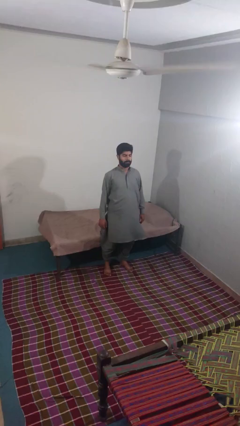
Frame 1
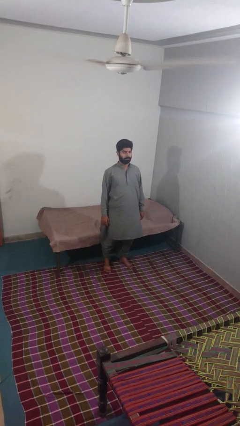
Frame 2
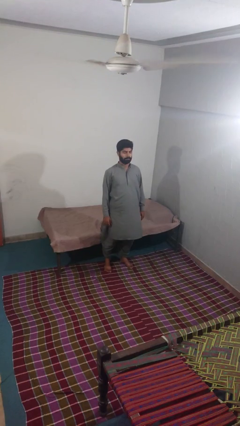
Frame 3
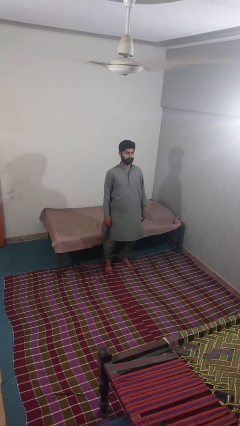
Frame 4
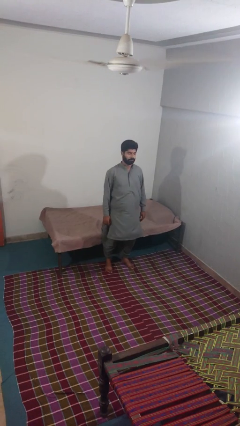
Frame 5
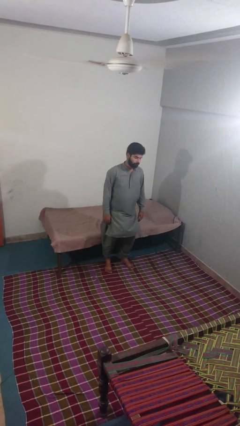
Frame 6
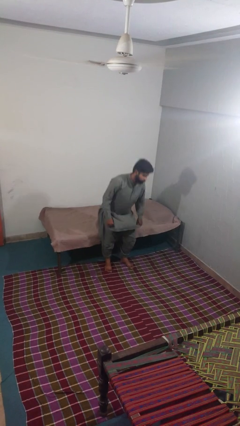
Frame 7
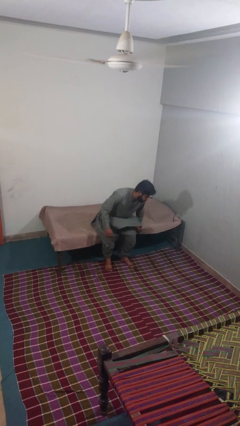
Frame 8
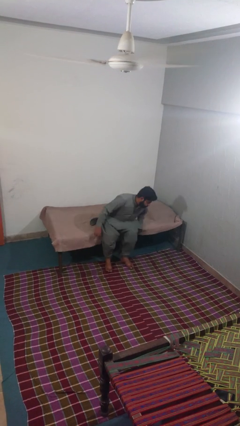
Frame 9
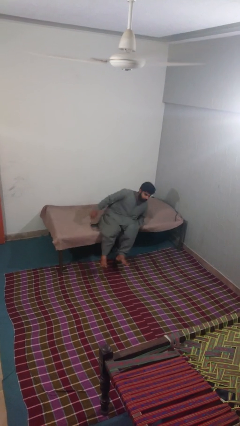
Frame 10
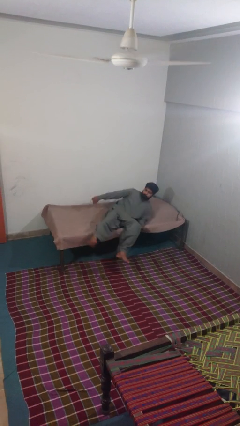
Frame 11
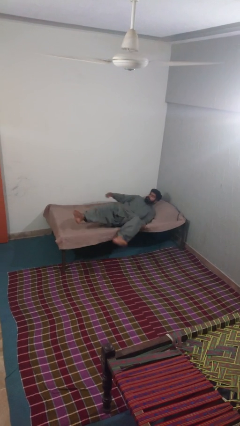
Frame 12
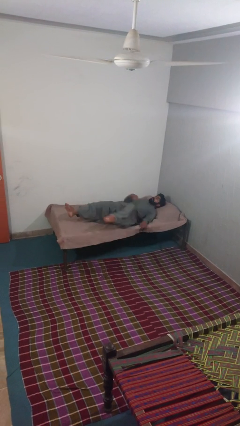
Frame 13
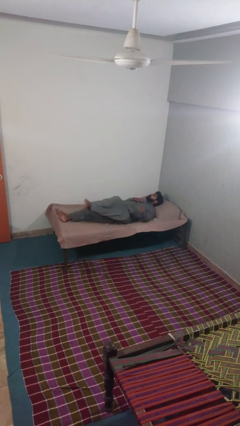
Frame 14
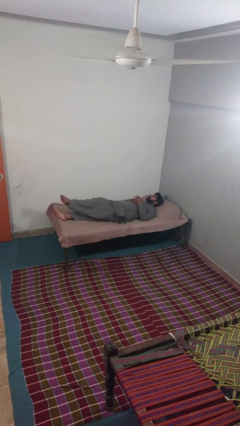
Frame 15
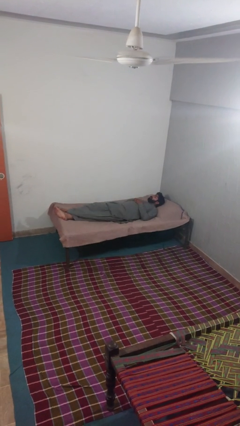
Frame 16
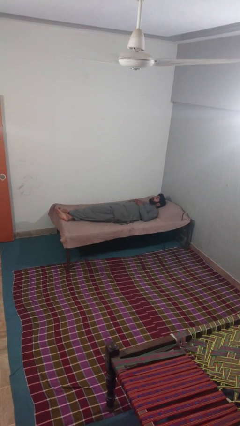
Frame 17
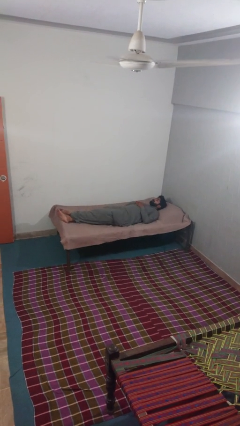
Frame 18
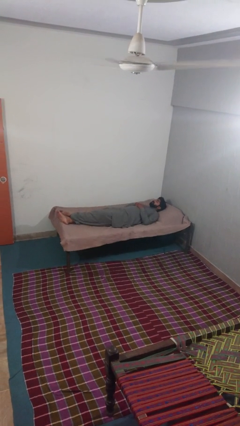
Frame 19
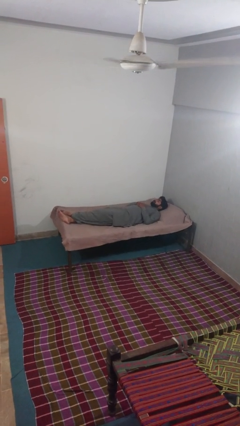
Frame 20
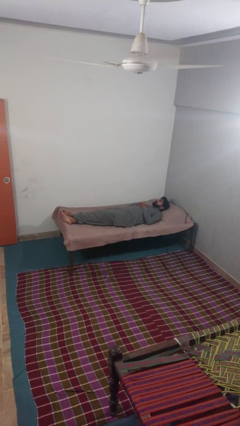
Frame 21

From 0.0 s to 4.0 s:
person lies down on bed

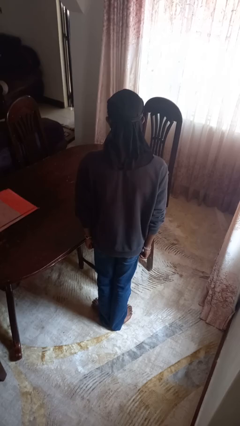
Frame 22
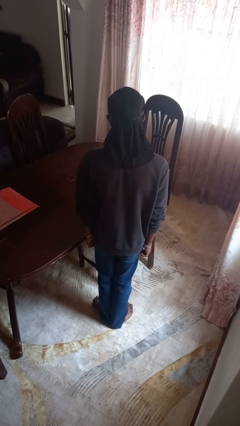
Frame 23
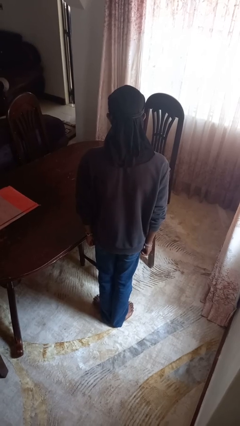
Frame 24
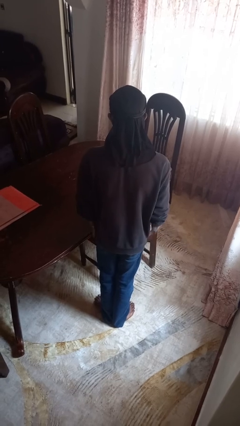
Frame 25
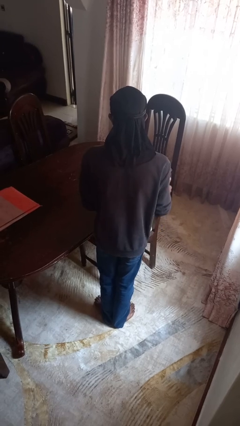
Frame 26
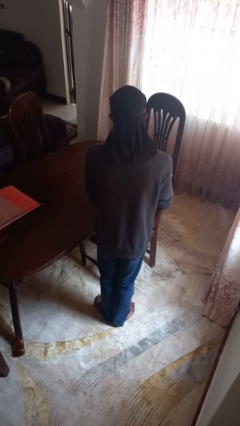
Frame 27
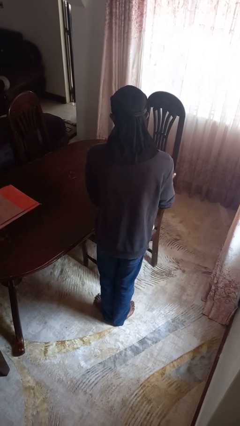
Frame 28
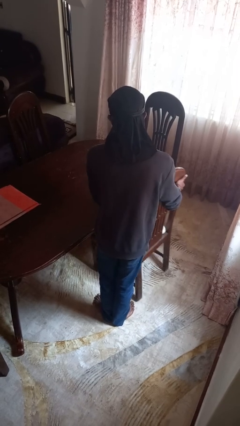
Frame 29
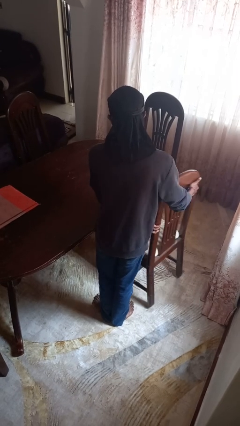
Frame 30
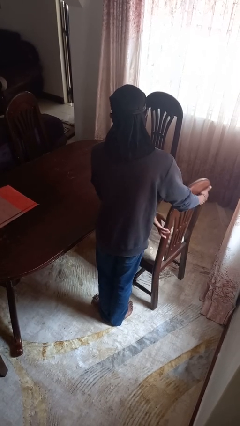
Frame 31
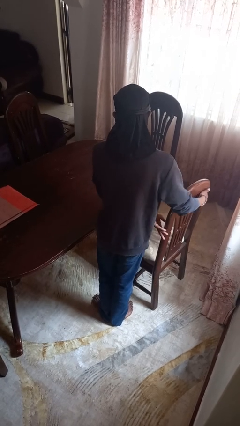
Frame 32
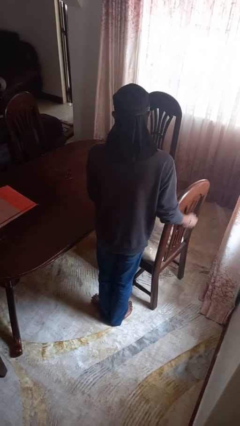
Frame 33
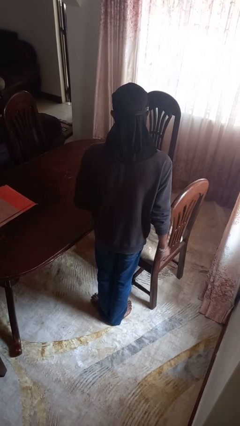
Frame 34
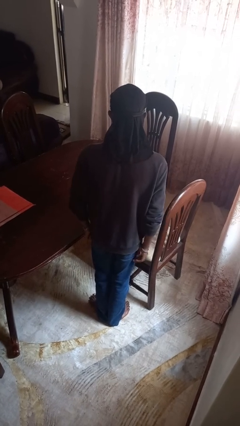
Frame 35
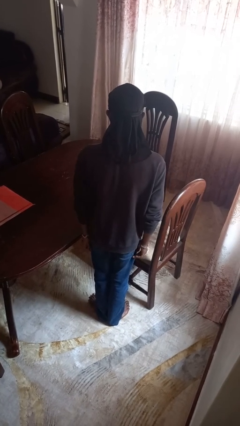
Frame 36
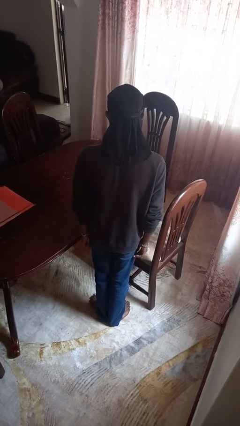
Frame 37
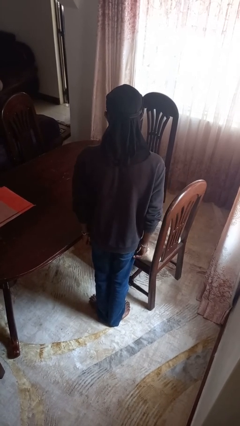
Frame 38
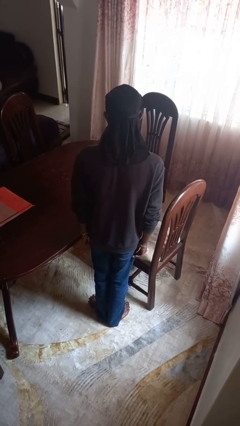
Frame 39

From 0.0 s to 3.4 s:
person pulls out chair

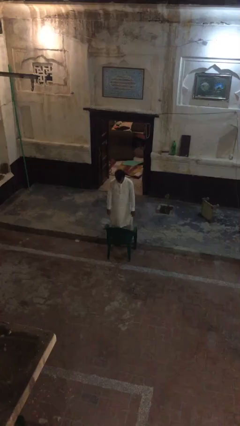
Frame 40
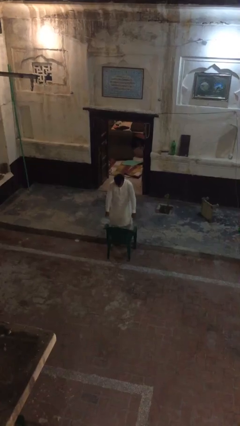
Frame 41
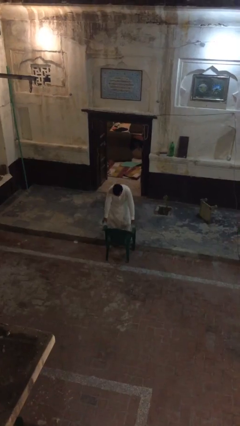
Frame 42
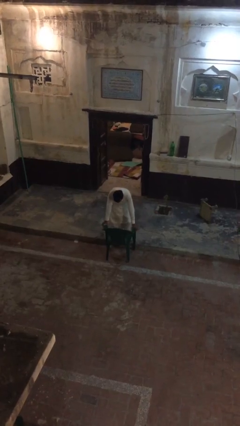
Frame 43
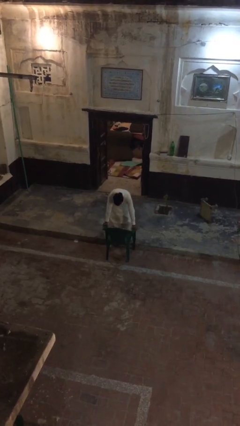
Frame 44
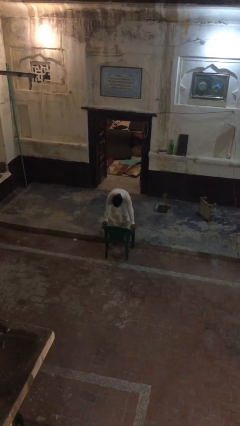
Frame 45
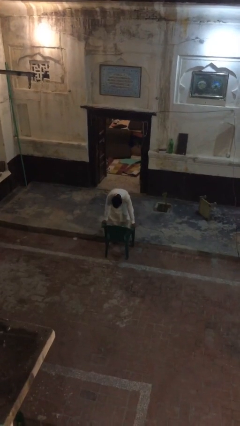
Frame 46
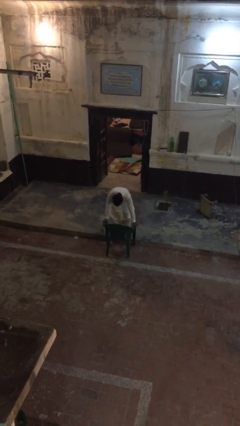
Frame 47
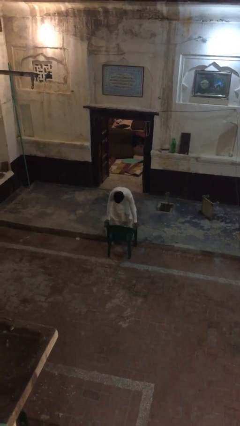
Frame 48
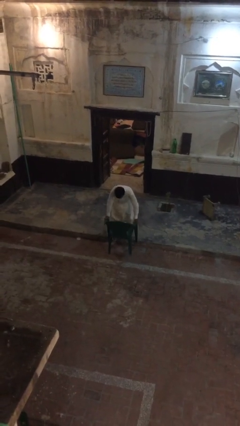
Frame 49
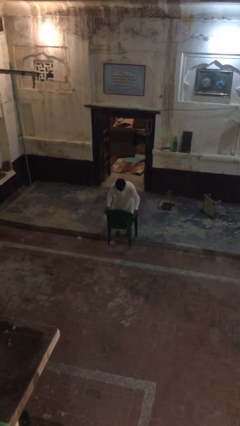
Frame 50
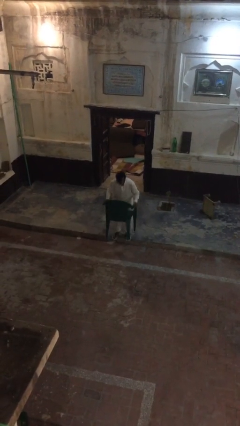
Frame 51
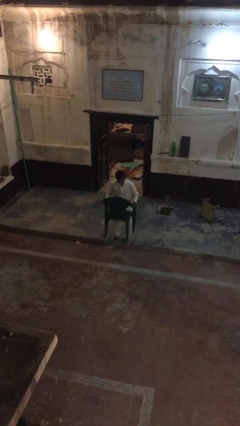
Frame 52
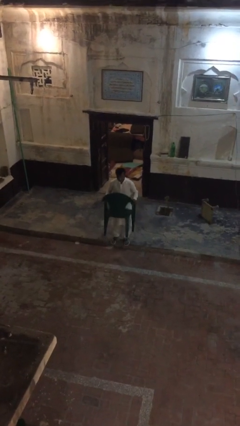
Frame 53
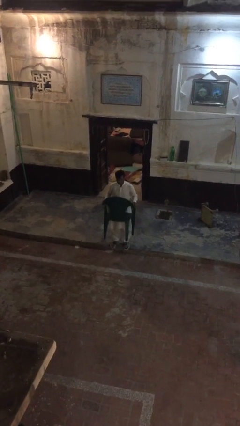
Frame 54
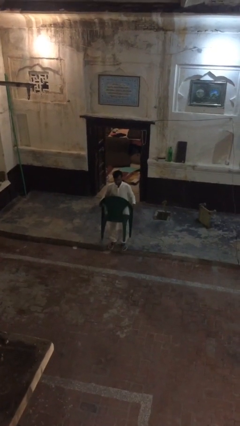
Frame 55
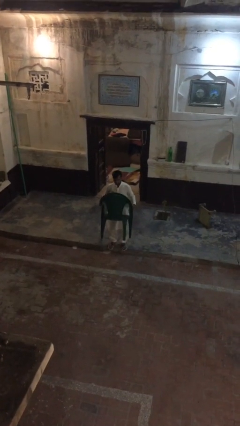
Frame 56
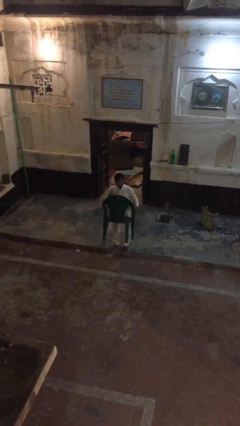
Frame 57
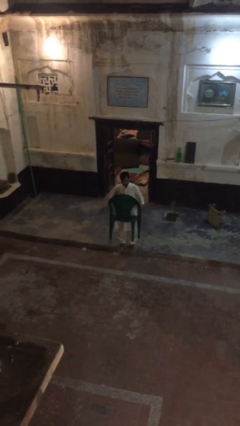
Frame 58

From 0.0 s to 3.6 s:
person picks up object from floor

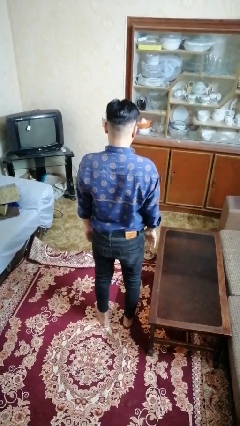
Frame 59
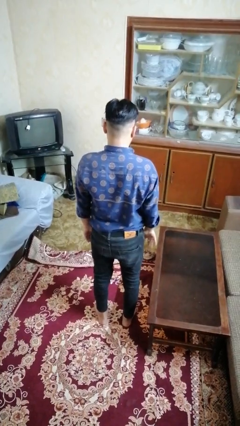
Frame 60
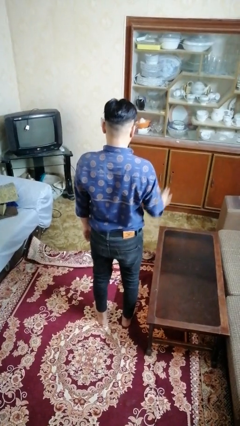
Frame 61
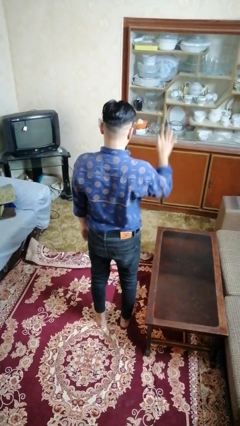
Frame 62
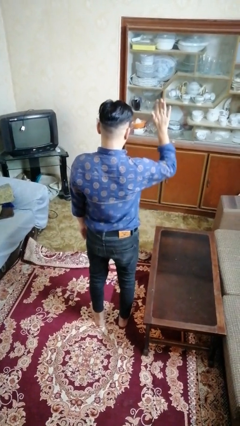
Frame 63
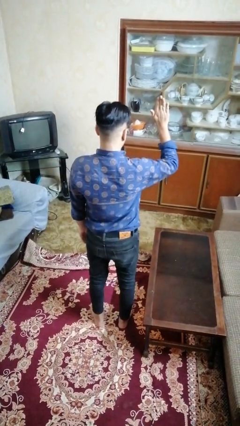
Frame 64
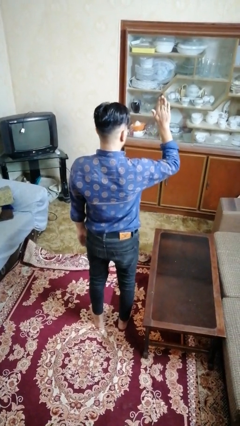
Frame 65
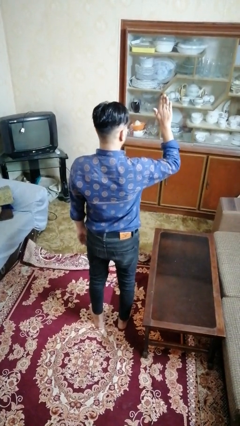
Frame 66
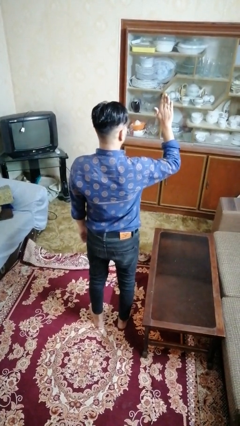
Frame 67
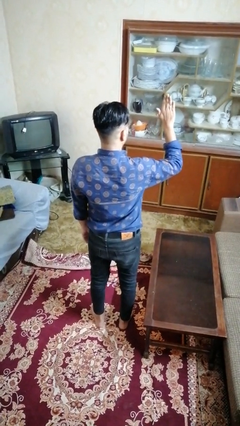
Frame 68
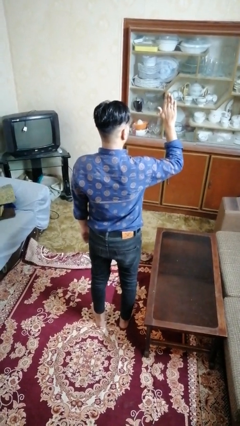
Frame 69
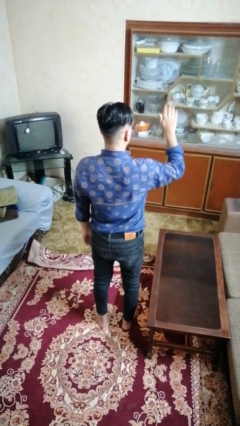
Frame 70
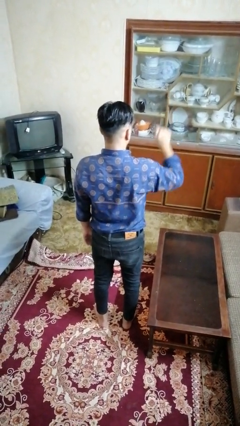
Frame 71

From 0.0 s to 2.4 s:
person gestures number five

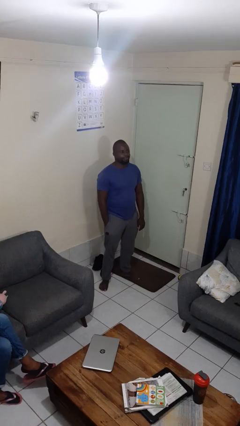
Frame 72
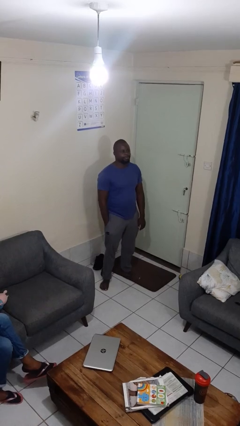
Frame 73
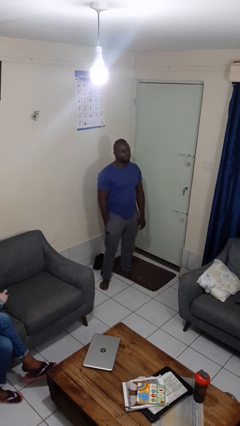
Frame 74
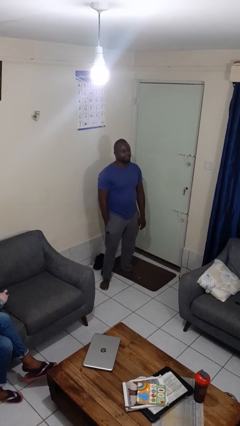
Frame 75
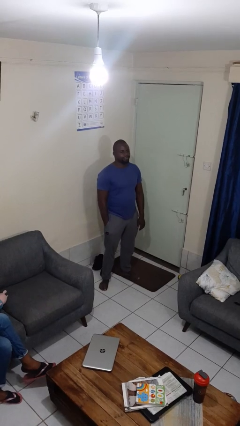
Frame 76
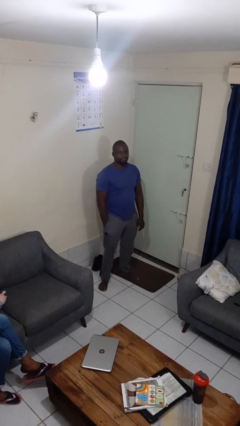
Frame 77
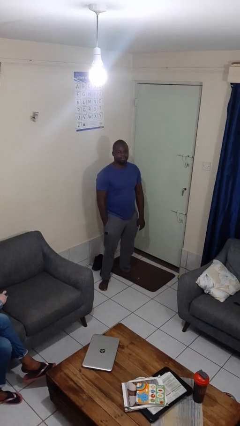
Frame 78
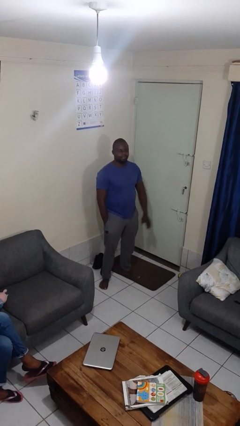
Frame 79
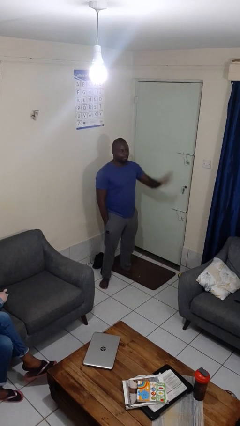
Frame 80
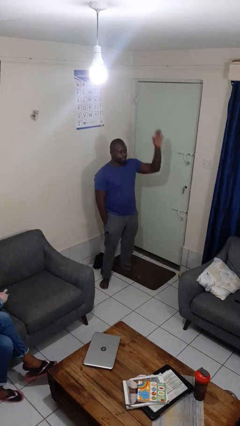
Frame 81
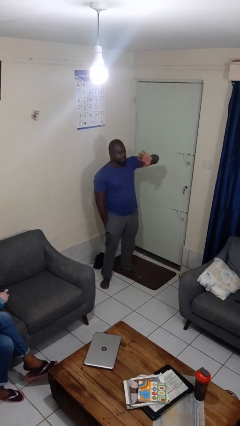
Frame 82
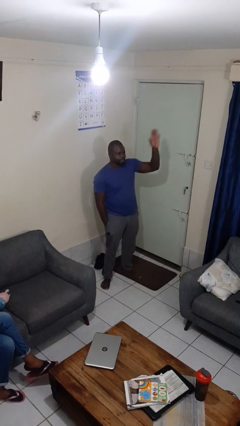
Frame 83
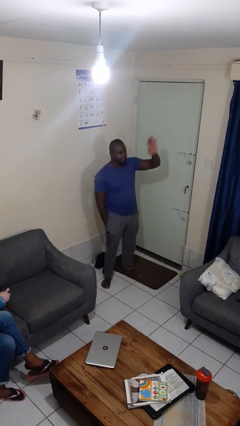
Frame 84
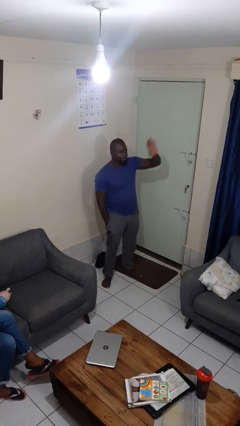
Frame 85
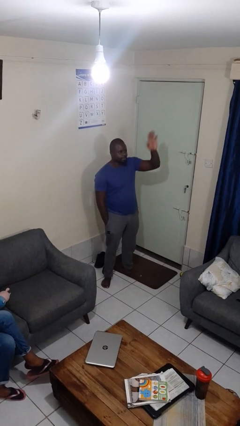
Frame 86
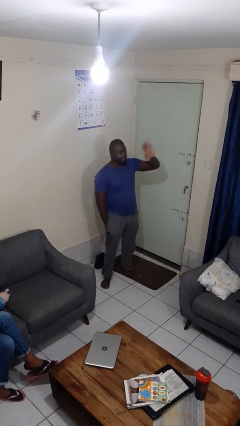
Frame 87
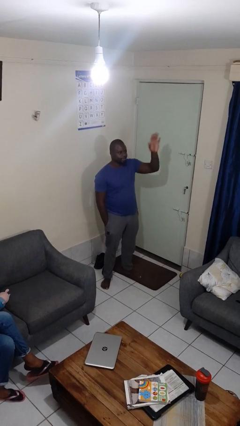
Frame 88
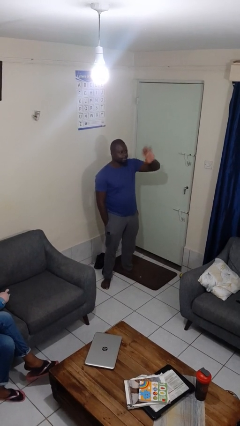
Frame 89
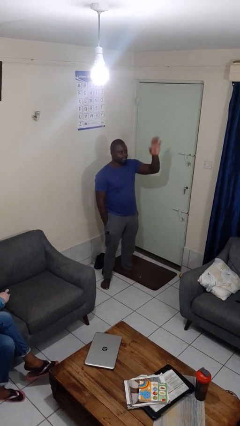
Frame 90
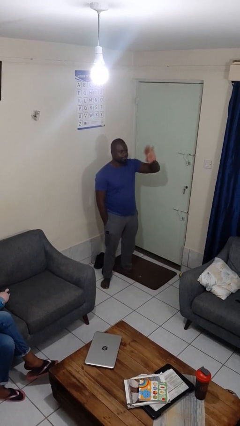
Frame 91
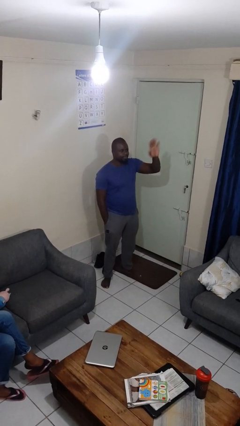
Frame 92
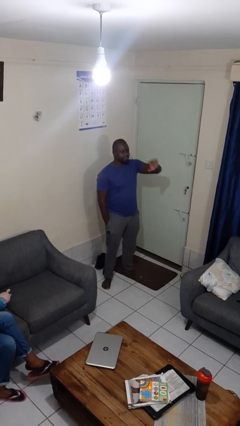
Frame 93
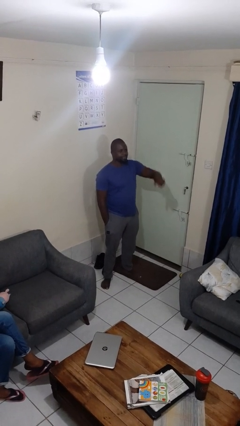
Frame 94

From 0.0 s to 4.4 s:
person waves at person
